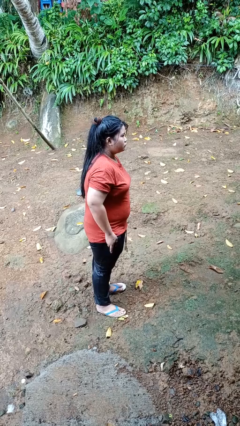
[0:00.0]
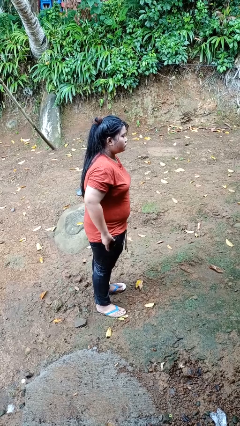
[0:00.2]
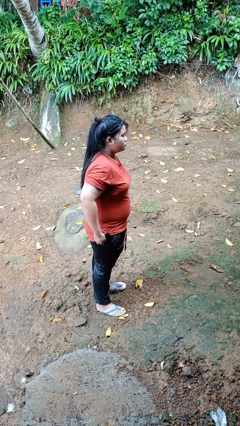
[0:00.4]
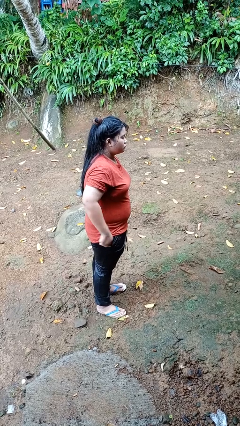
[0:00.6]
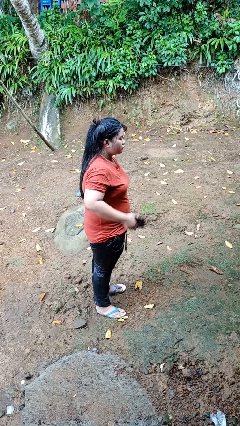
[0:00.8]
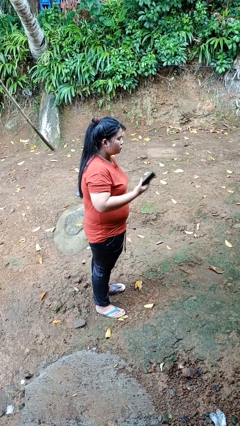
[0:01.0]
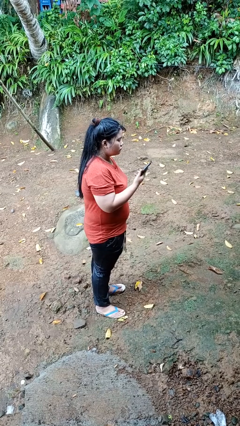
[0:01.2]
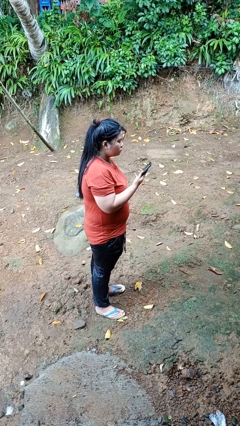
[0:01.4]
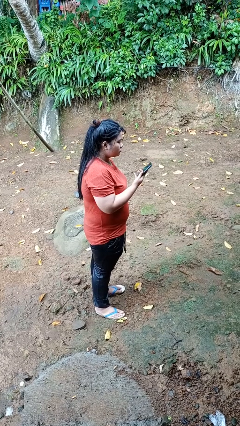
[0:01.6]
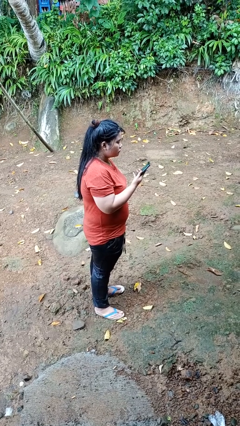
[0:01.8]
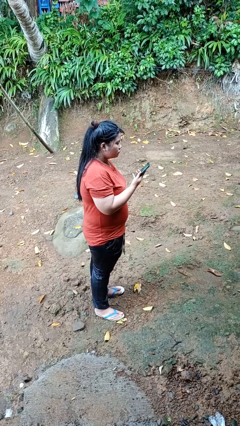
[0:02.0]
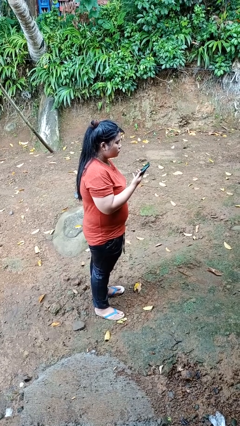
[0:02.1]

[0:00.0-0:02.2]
person takes phone from pocket

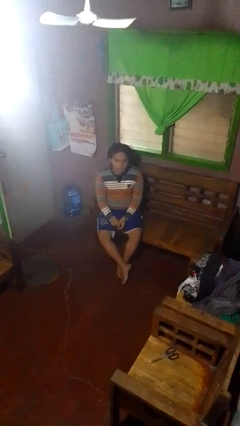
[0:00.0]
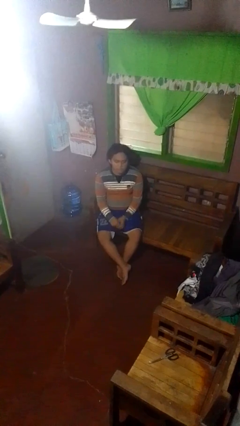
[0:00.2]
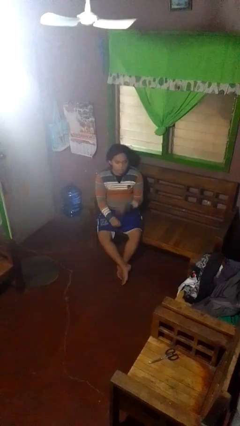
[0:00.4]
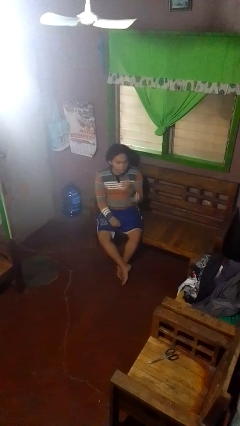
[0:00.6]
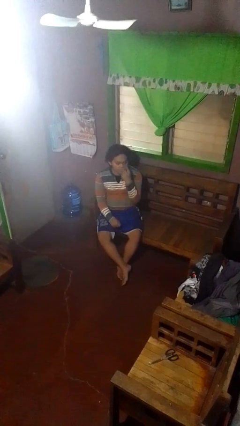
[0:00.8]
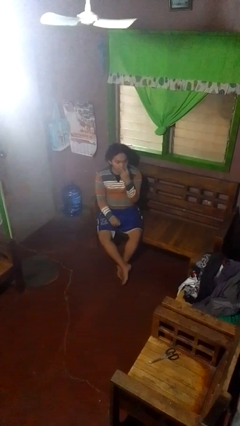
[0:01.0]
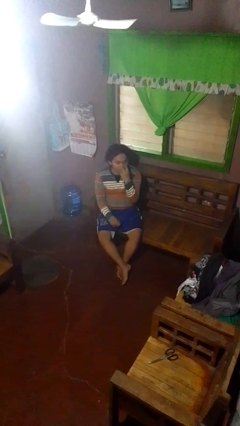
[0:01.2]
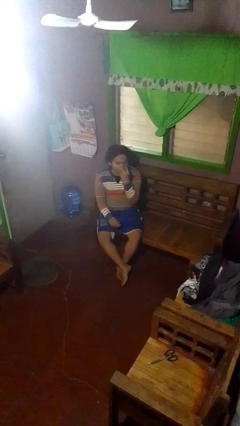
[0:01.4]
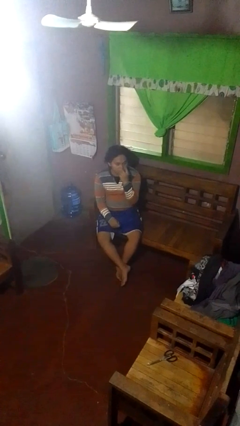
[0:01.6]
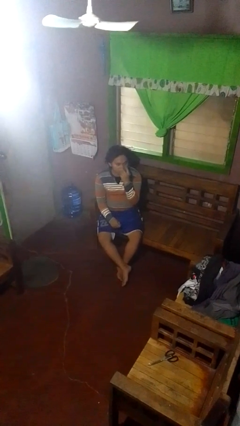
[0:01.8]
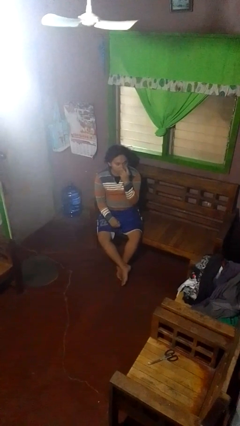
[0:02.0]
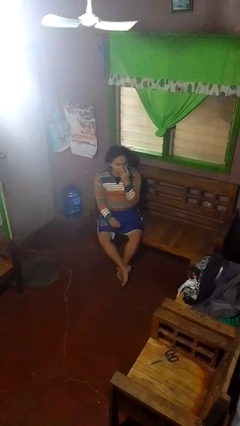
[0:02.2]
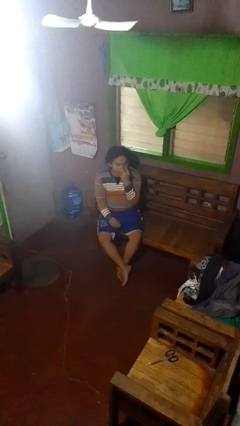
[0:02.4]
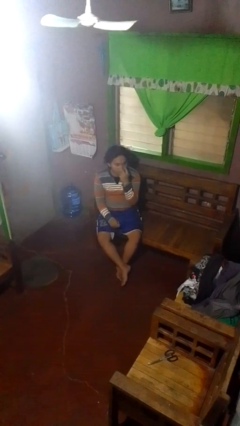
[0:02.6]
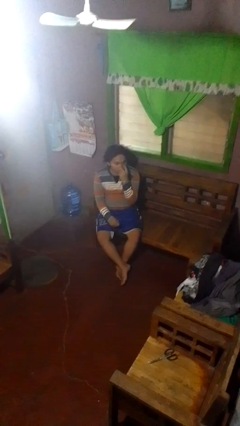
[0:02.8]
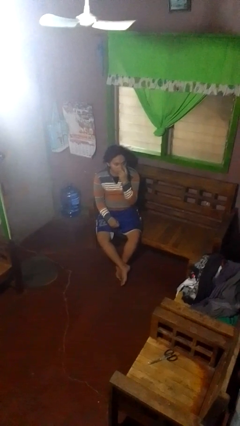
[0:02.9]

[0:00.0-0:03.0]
person gestures watch closely

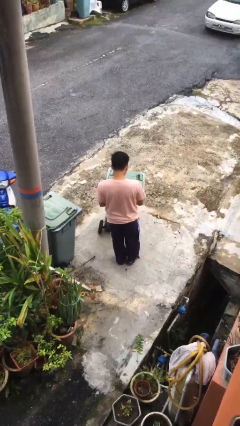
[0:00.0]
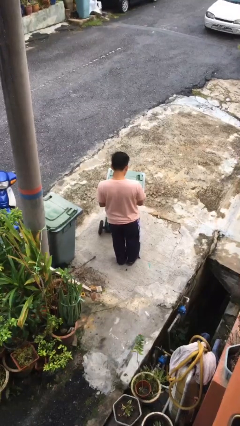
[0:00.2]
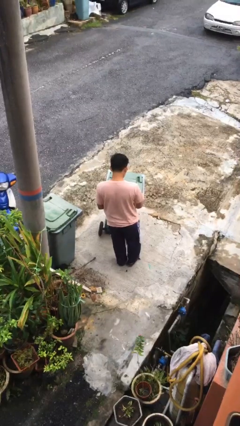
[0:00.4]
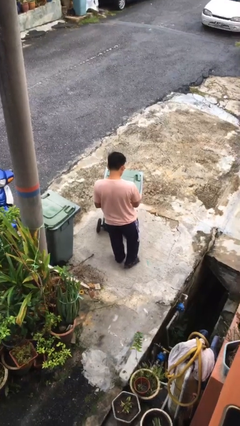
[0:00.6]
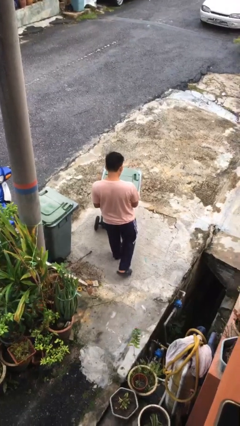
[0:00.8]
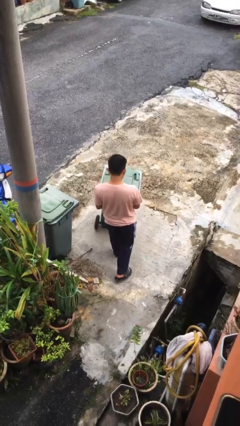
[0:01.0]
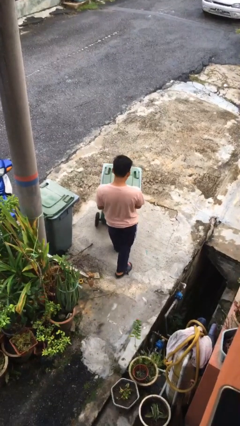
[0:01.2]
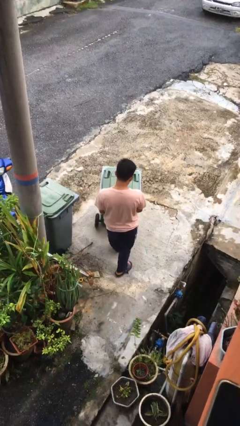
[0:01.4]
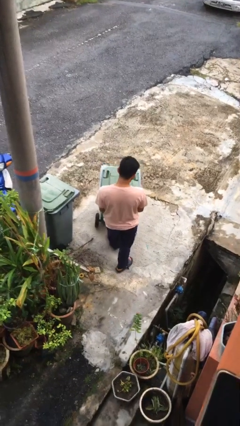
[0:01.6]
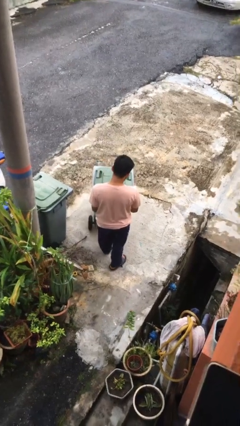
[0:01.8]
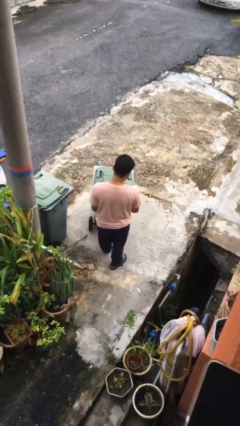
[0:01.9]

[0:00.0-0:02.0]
person pulls wheeled trashcan

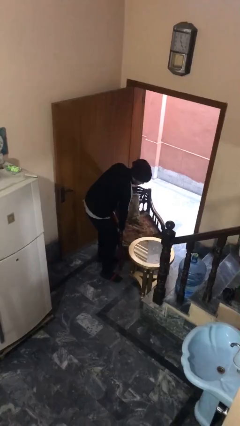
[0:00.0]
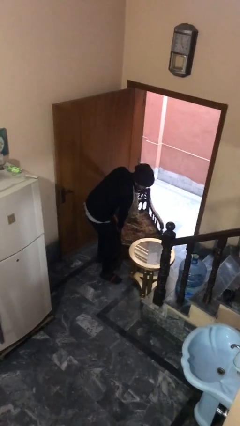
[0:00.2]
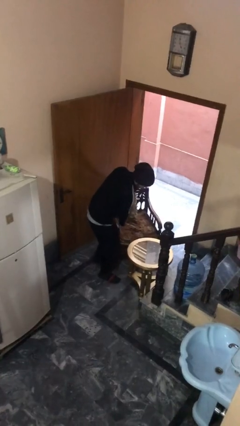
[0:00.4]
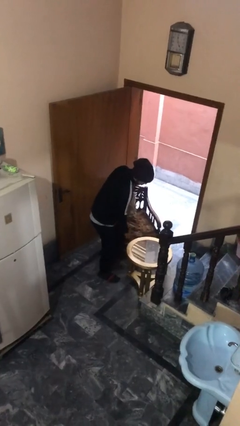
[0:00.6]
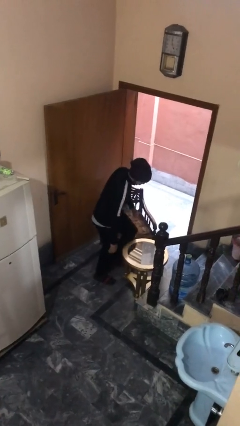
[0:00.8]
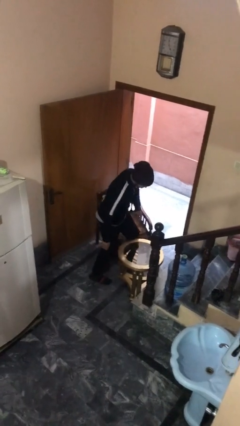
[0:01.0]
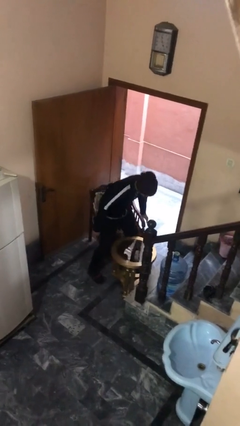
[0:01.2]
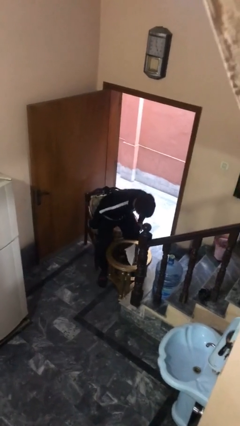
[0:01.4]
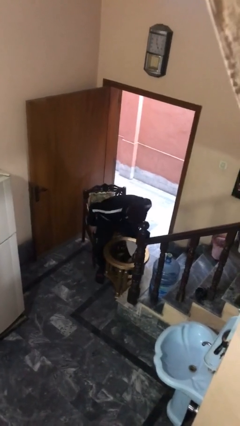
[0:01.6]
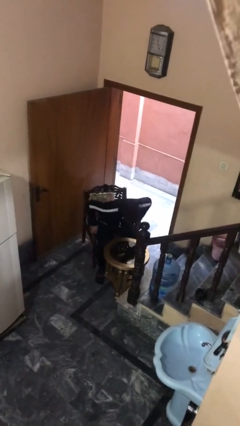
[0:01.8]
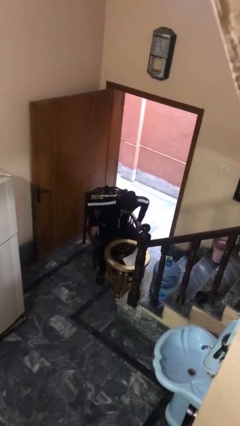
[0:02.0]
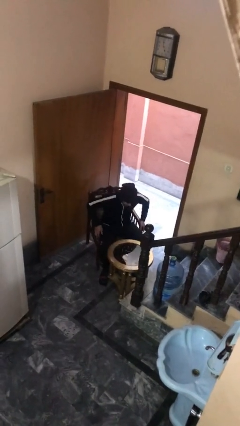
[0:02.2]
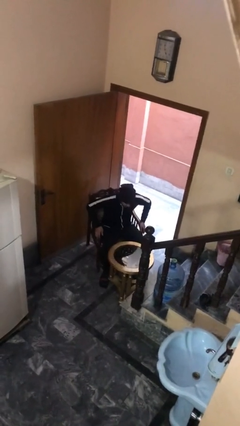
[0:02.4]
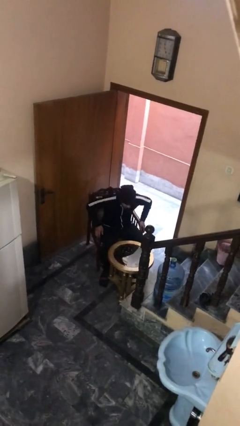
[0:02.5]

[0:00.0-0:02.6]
person sits down

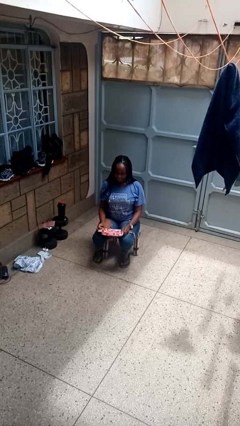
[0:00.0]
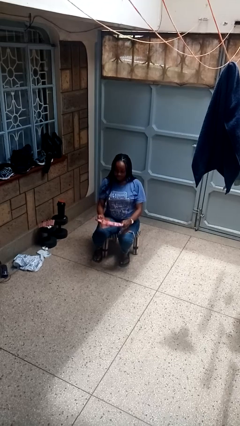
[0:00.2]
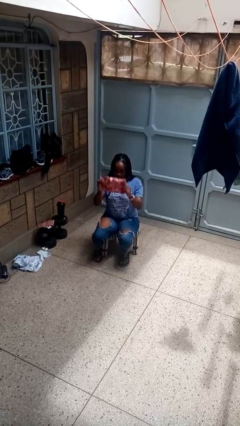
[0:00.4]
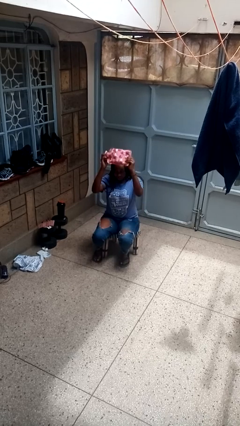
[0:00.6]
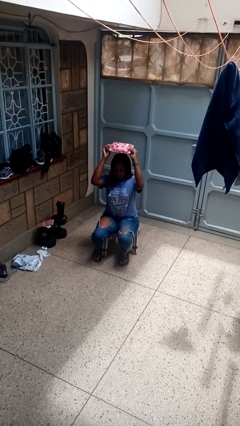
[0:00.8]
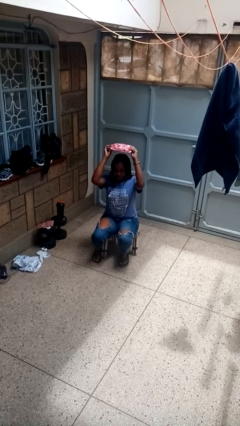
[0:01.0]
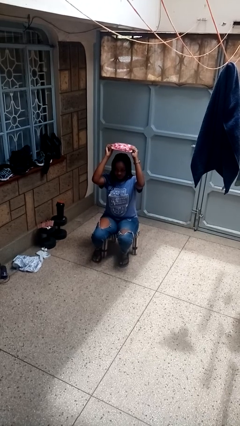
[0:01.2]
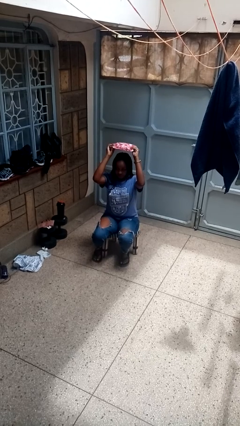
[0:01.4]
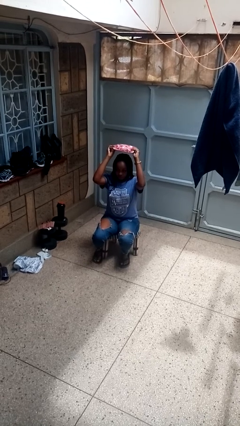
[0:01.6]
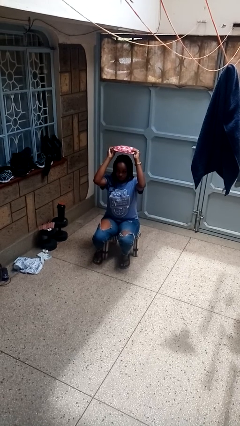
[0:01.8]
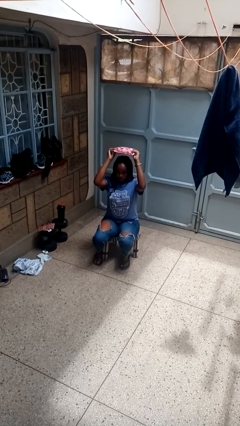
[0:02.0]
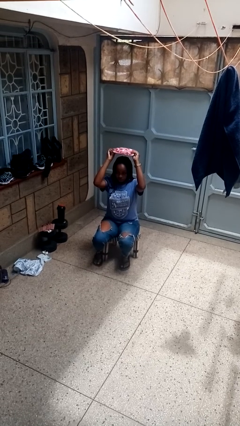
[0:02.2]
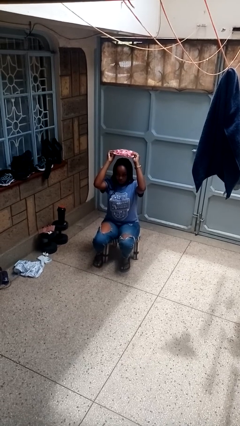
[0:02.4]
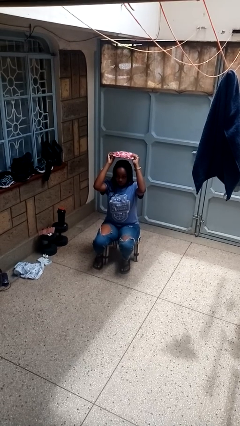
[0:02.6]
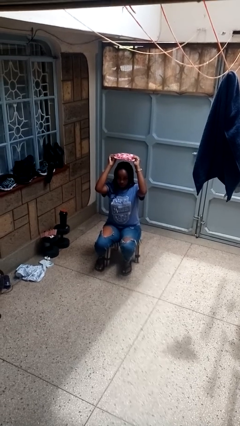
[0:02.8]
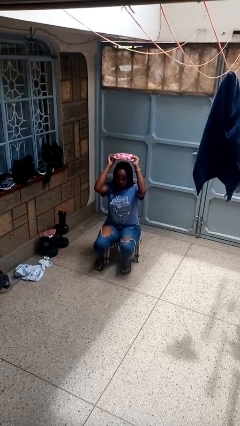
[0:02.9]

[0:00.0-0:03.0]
person holds object above head

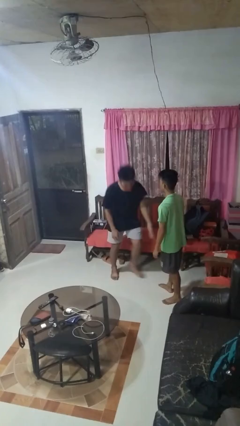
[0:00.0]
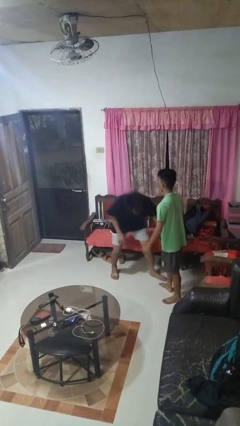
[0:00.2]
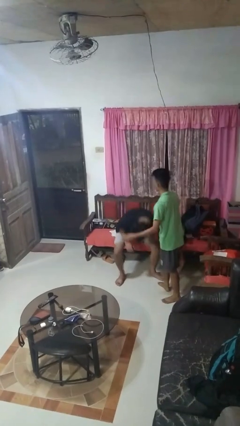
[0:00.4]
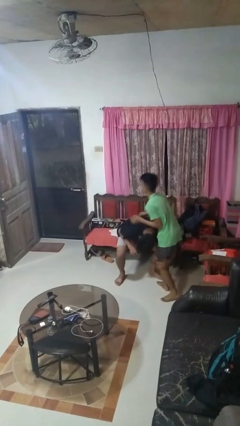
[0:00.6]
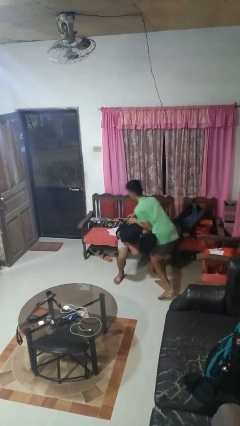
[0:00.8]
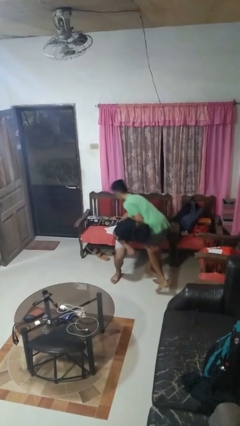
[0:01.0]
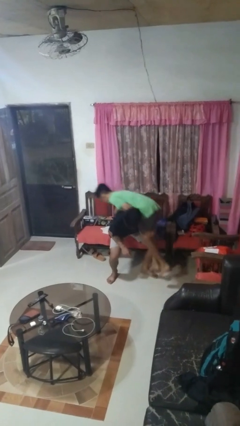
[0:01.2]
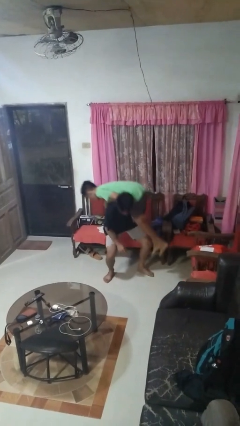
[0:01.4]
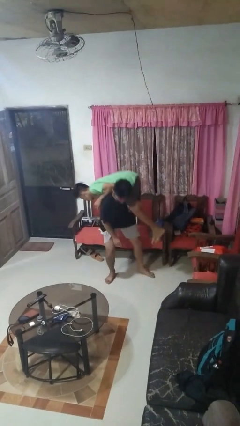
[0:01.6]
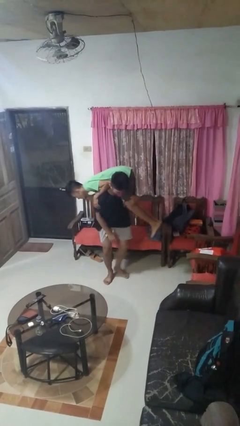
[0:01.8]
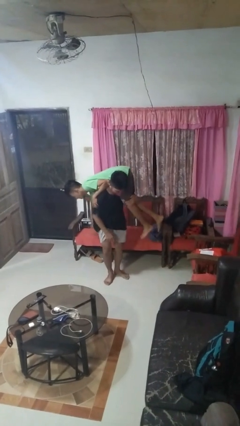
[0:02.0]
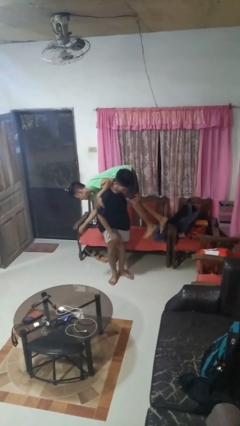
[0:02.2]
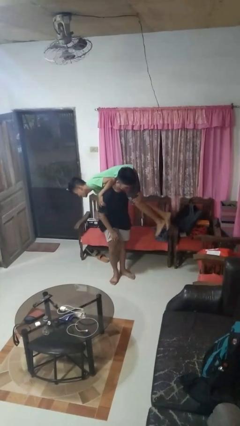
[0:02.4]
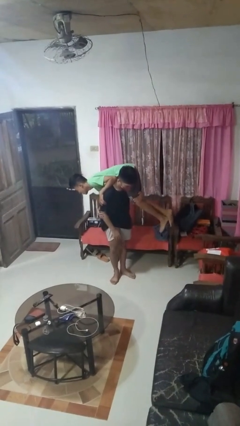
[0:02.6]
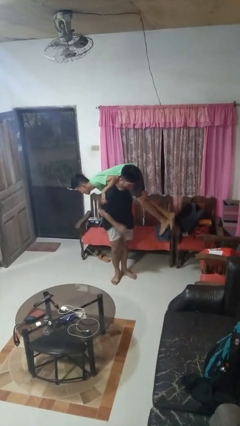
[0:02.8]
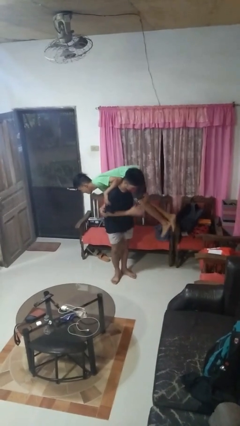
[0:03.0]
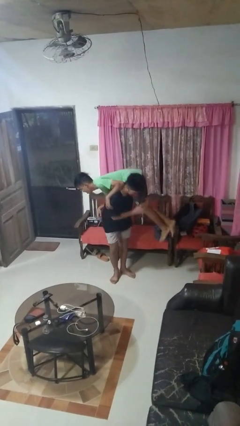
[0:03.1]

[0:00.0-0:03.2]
person carries person over shoulder

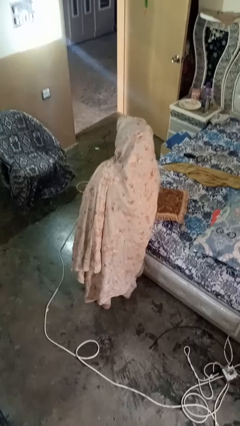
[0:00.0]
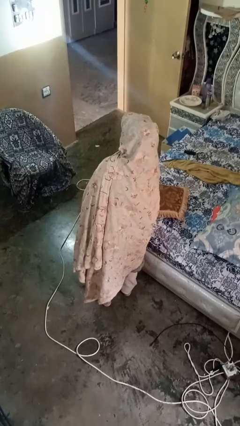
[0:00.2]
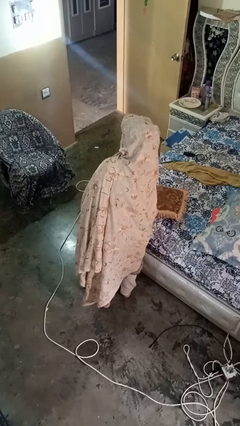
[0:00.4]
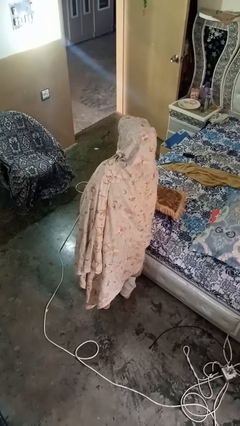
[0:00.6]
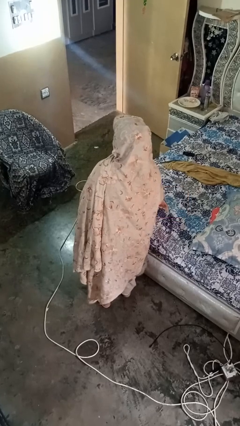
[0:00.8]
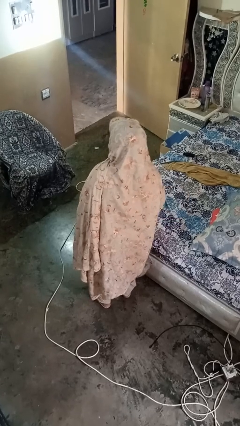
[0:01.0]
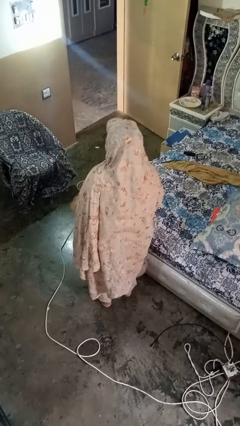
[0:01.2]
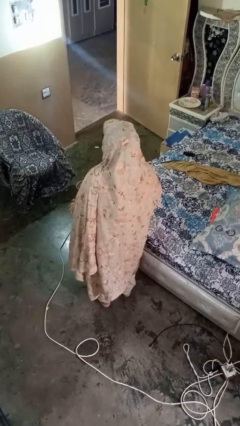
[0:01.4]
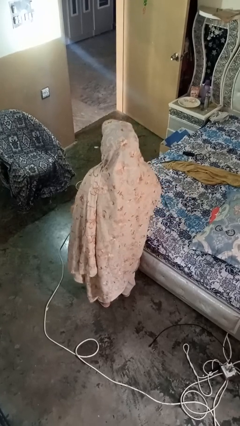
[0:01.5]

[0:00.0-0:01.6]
person picks up object from bed
